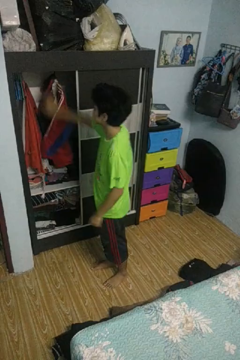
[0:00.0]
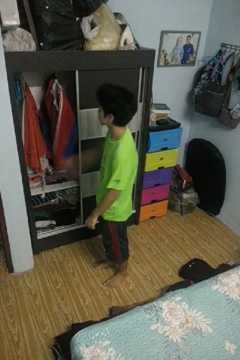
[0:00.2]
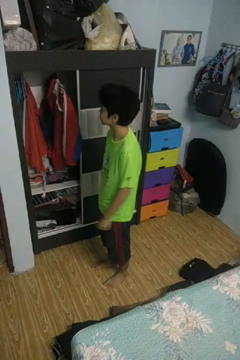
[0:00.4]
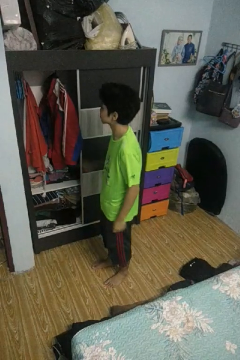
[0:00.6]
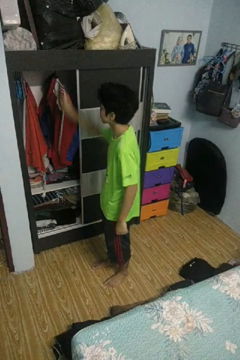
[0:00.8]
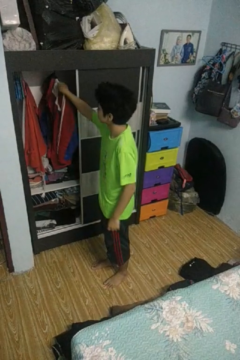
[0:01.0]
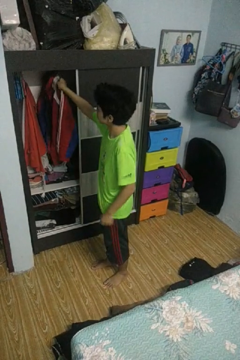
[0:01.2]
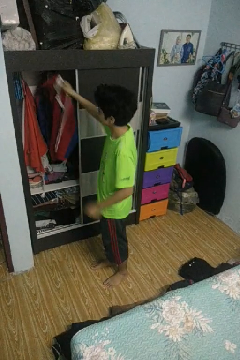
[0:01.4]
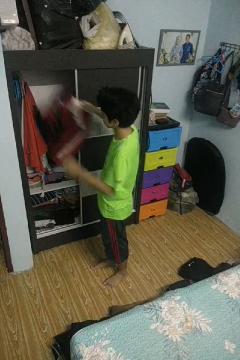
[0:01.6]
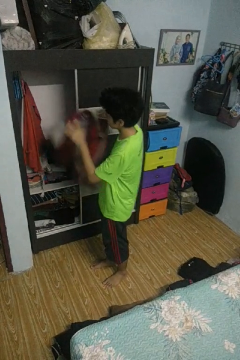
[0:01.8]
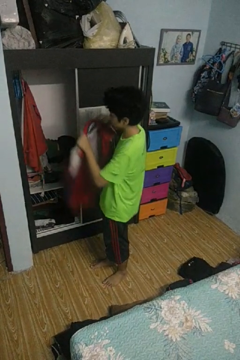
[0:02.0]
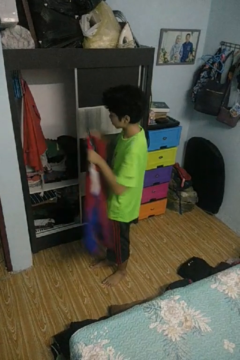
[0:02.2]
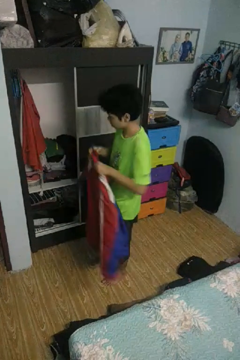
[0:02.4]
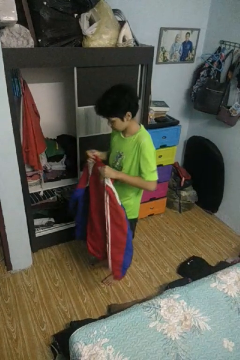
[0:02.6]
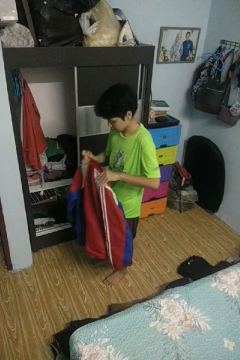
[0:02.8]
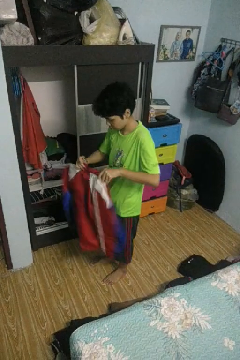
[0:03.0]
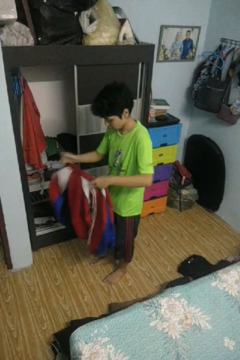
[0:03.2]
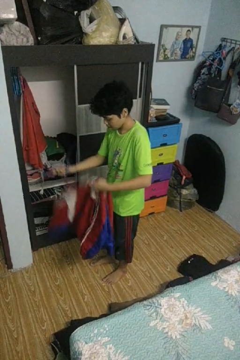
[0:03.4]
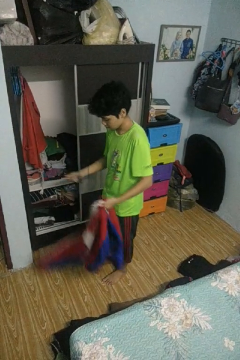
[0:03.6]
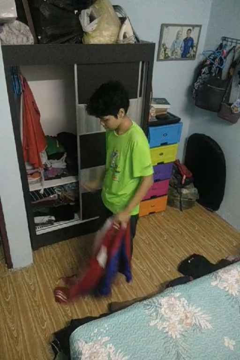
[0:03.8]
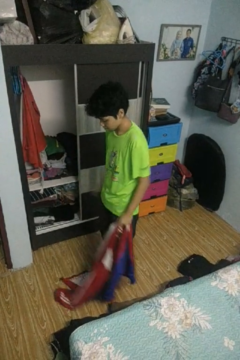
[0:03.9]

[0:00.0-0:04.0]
person takes clothes from closet

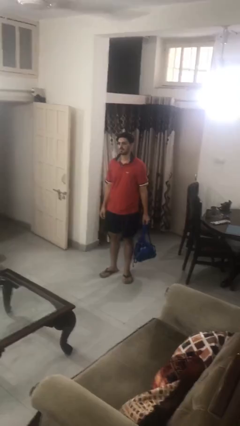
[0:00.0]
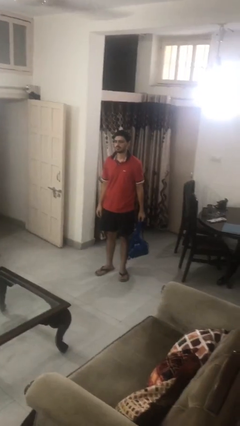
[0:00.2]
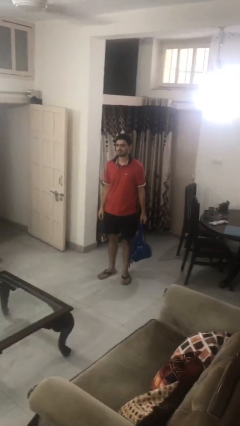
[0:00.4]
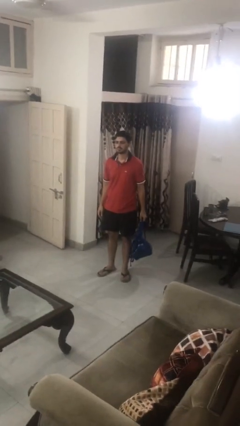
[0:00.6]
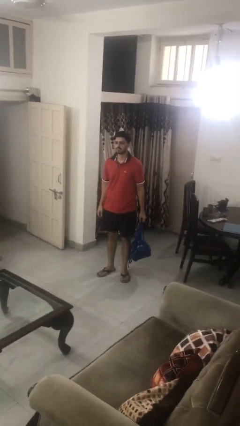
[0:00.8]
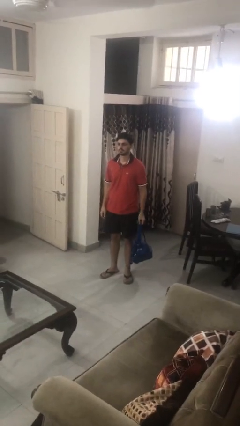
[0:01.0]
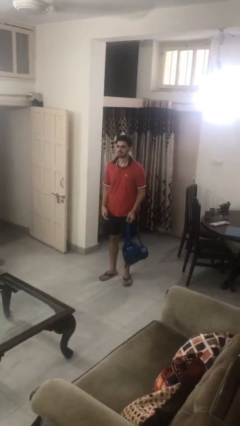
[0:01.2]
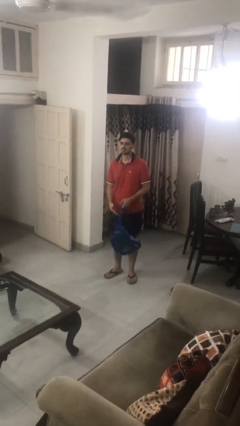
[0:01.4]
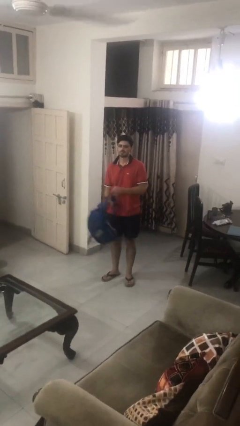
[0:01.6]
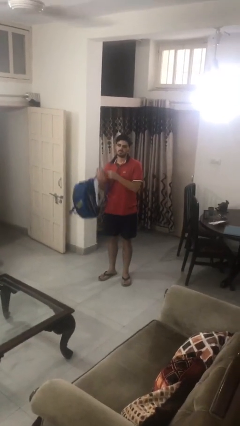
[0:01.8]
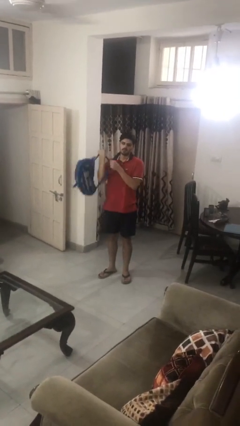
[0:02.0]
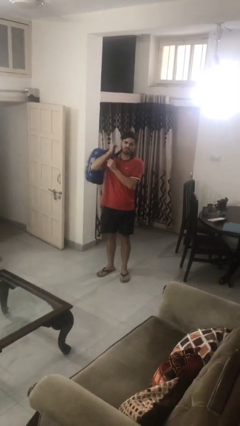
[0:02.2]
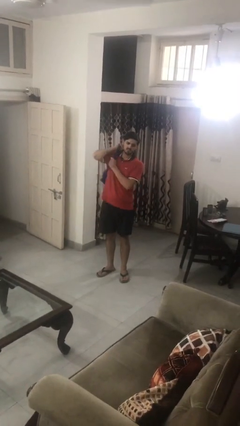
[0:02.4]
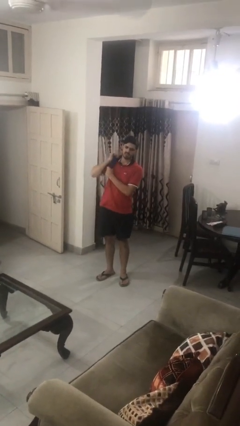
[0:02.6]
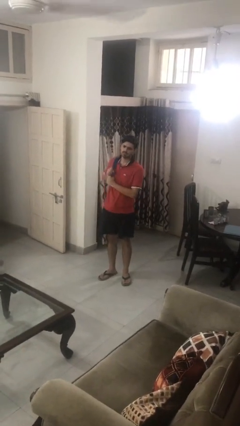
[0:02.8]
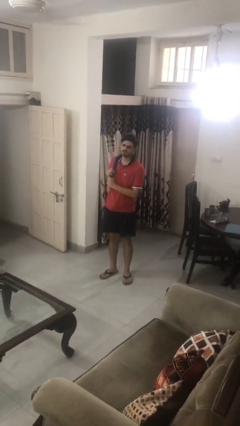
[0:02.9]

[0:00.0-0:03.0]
person puts on backpack

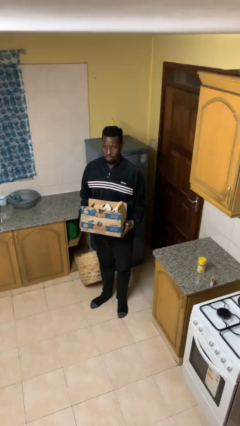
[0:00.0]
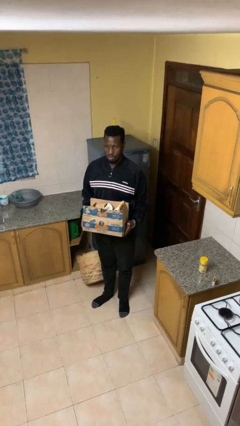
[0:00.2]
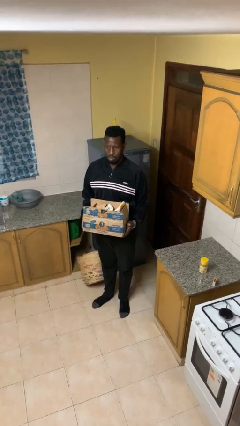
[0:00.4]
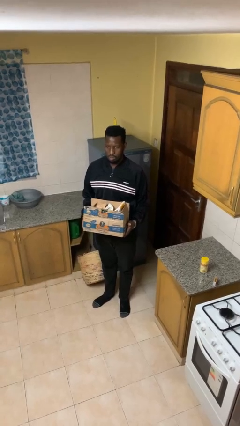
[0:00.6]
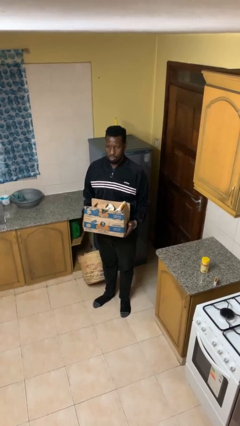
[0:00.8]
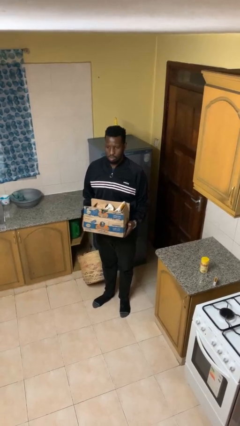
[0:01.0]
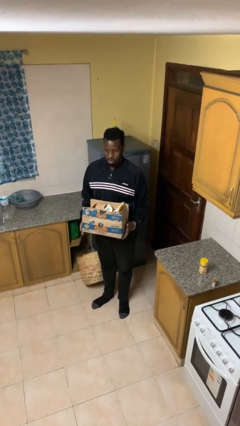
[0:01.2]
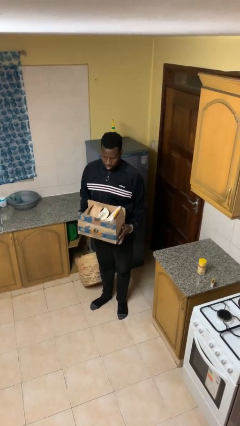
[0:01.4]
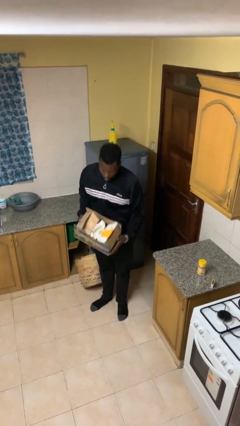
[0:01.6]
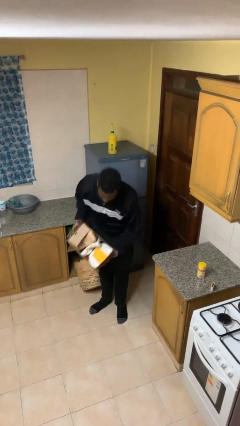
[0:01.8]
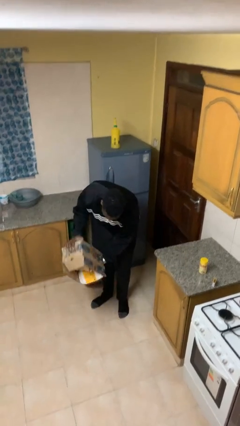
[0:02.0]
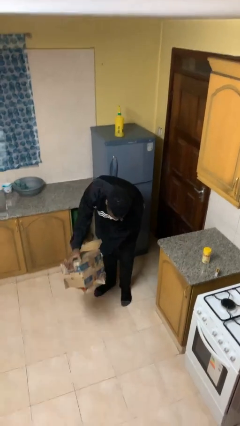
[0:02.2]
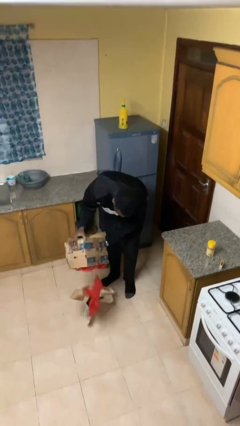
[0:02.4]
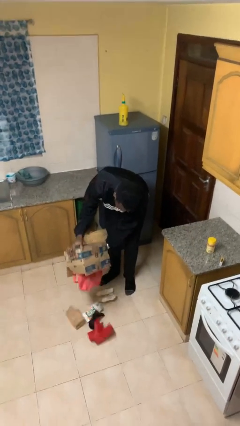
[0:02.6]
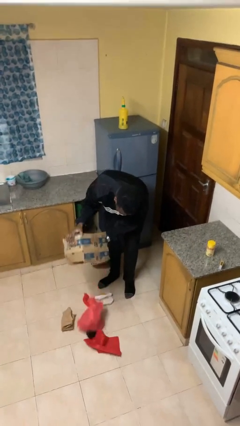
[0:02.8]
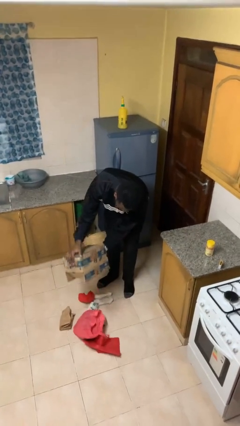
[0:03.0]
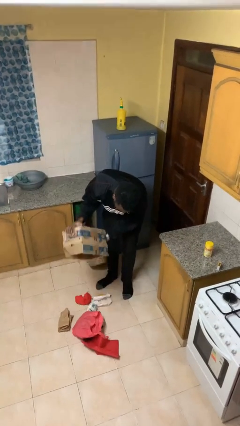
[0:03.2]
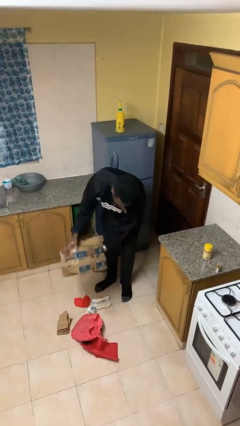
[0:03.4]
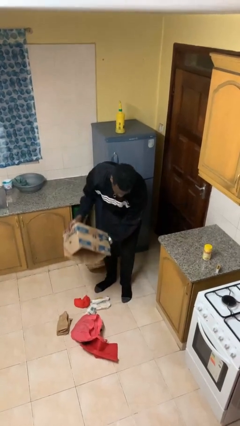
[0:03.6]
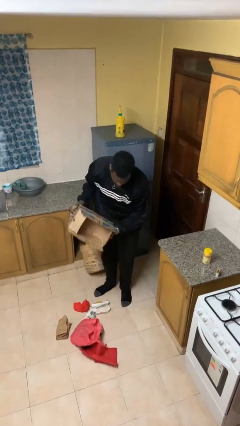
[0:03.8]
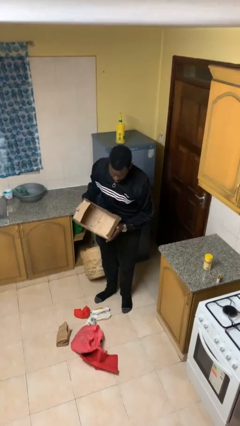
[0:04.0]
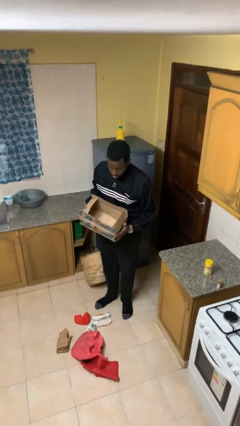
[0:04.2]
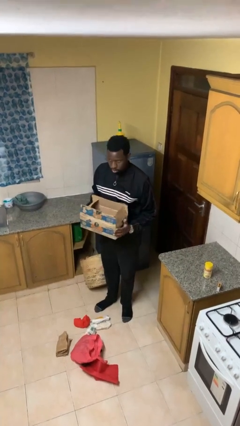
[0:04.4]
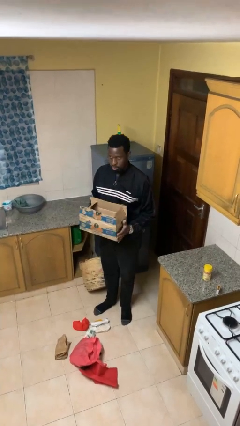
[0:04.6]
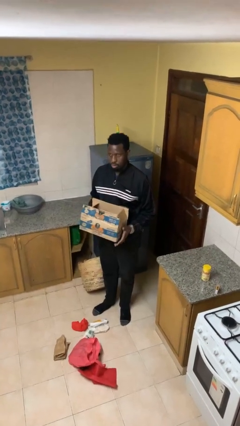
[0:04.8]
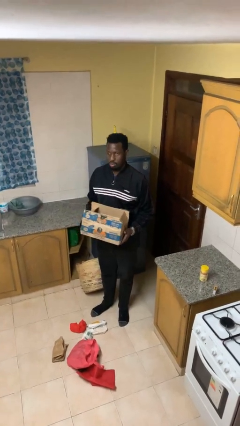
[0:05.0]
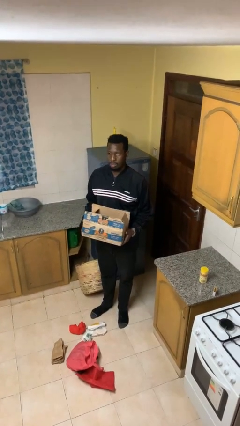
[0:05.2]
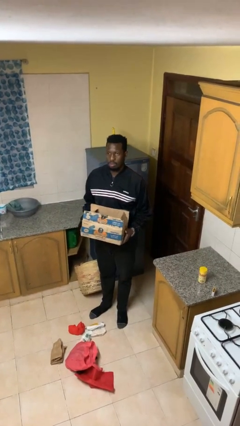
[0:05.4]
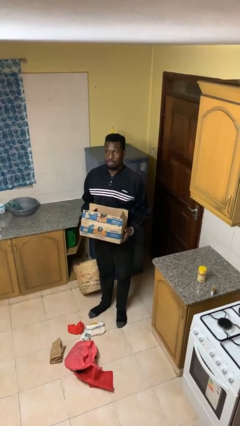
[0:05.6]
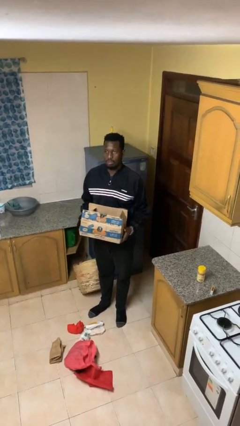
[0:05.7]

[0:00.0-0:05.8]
person unloads box onto floor

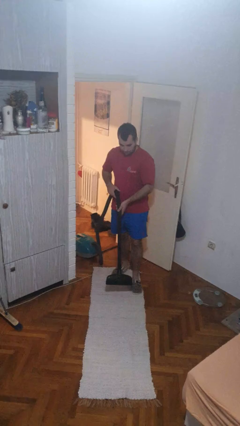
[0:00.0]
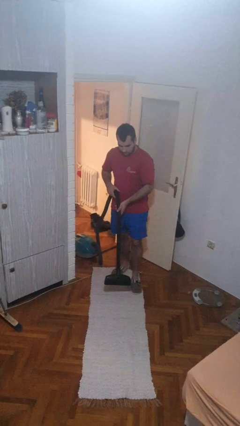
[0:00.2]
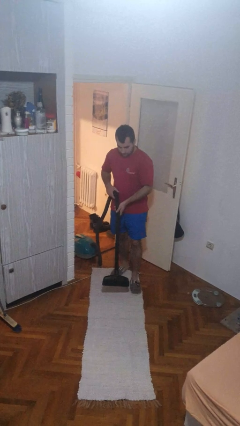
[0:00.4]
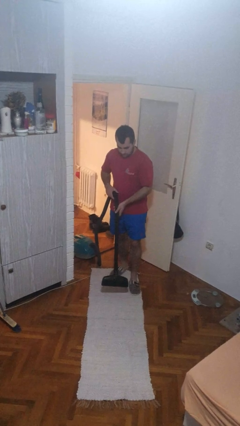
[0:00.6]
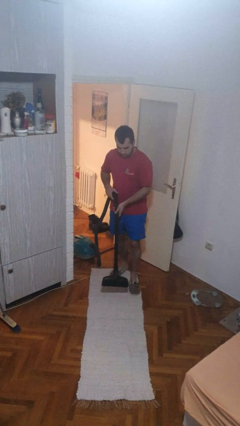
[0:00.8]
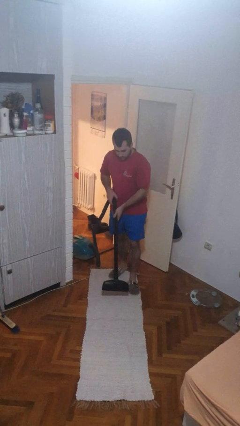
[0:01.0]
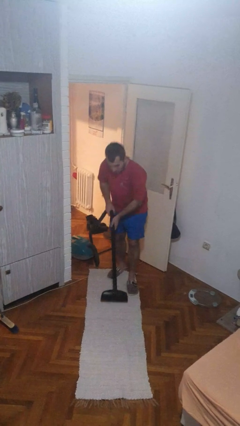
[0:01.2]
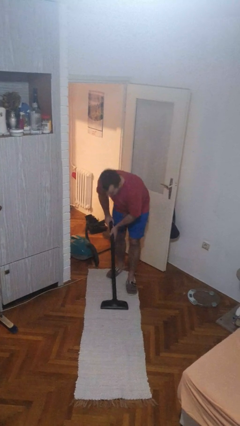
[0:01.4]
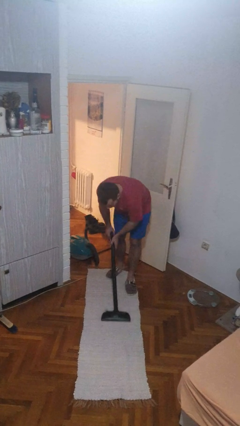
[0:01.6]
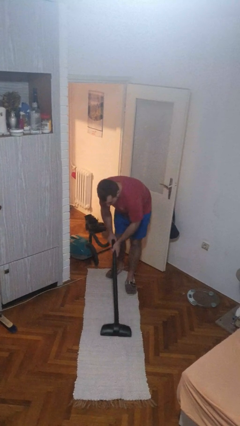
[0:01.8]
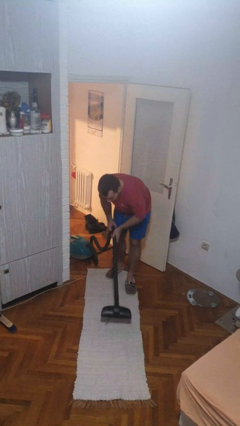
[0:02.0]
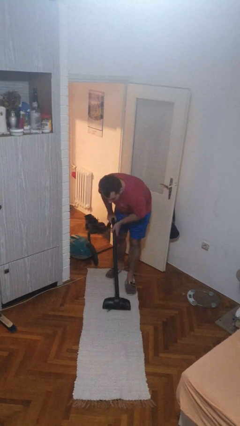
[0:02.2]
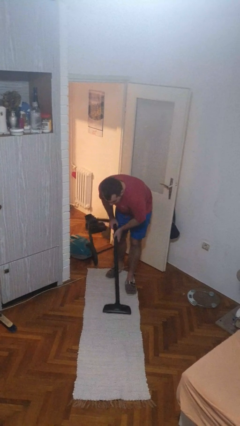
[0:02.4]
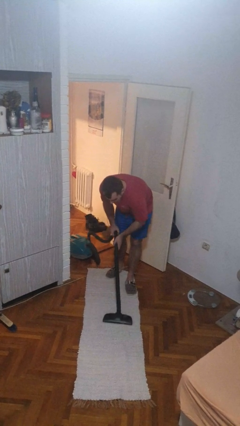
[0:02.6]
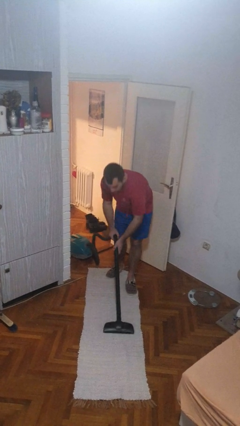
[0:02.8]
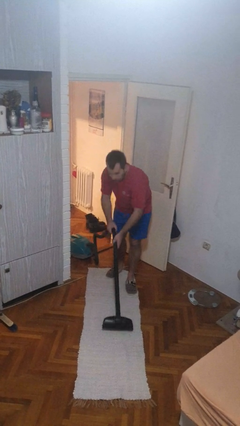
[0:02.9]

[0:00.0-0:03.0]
person vacuums carpet

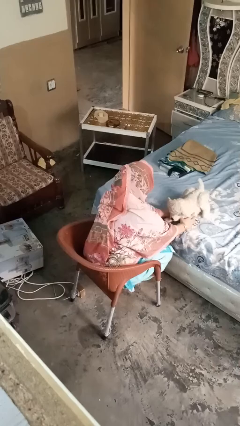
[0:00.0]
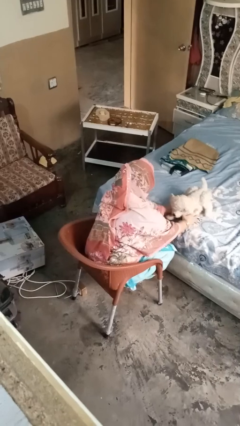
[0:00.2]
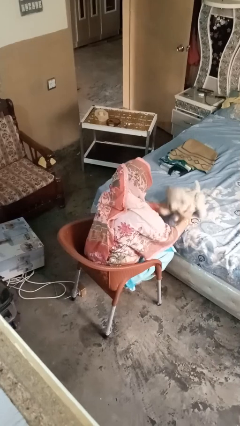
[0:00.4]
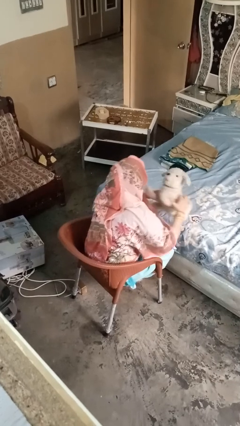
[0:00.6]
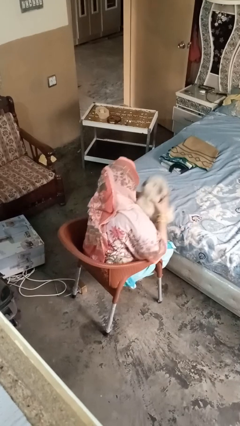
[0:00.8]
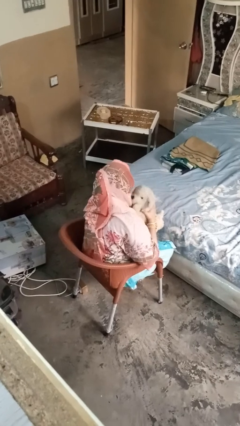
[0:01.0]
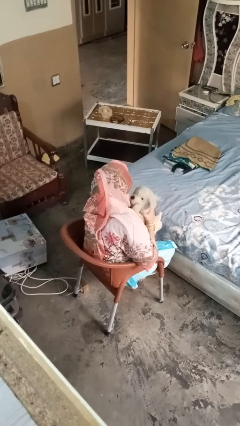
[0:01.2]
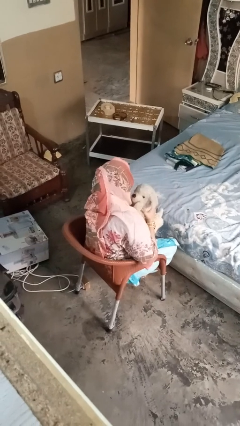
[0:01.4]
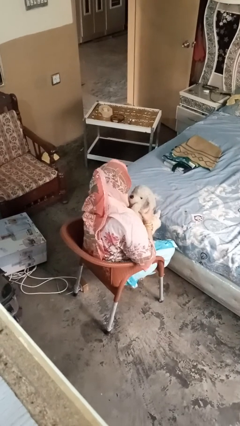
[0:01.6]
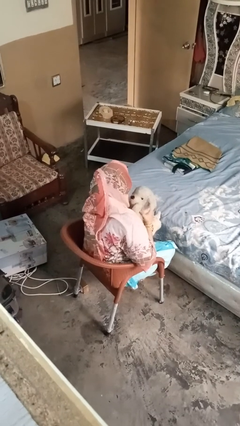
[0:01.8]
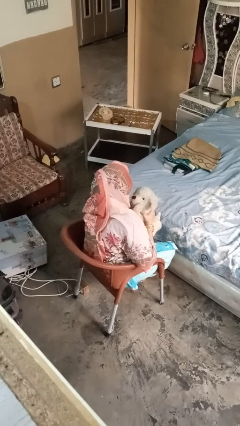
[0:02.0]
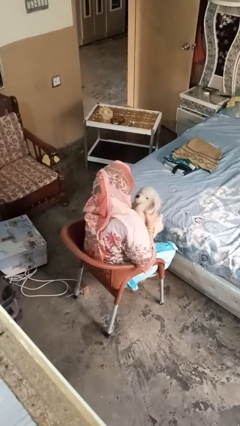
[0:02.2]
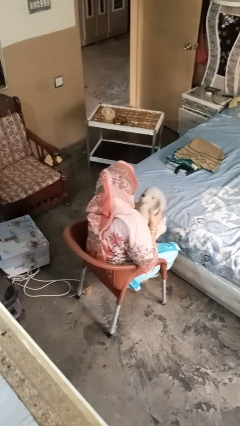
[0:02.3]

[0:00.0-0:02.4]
person hugs stuffed animal
